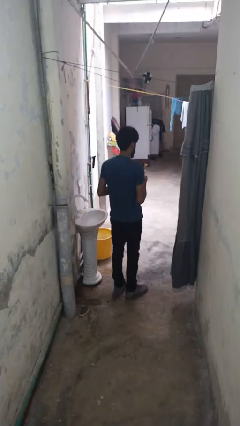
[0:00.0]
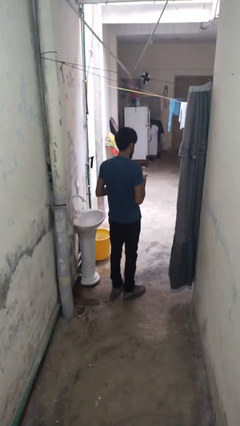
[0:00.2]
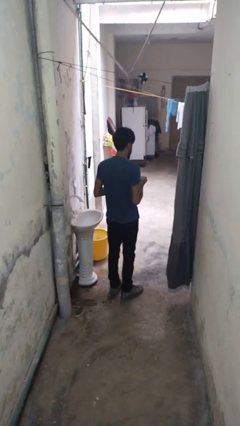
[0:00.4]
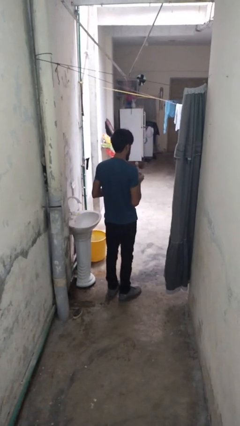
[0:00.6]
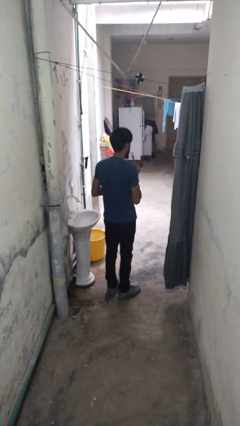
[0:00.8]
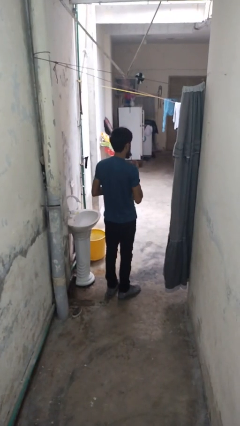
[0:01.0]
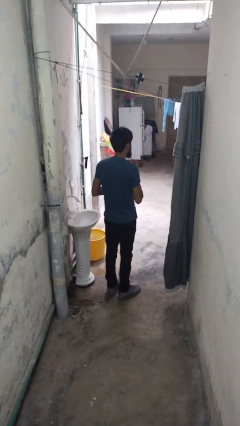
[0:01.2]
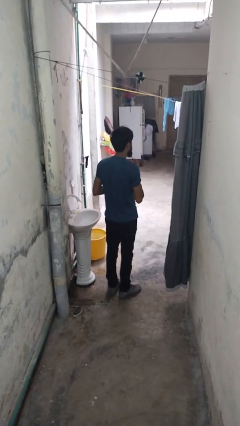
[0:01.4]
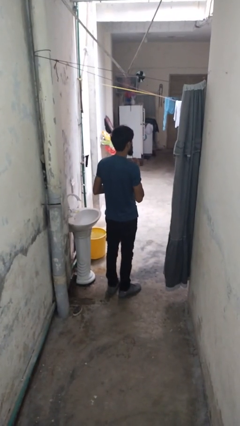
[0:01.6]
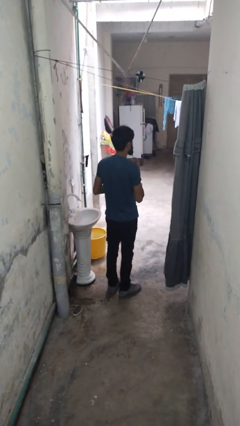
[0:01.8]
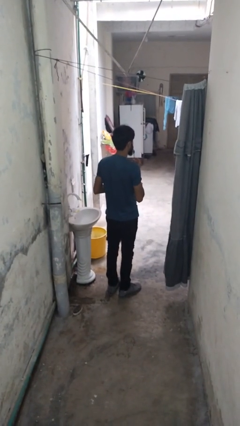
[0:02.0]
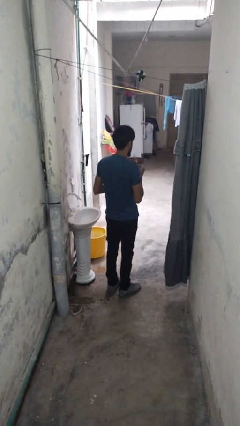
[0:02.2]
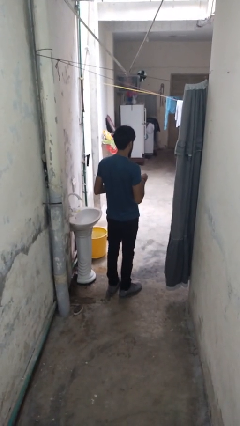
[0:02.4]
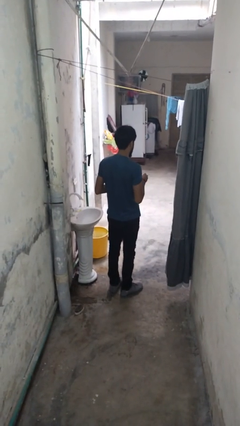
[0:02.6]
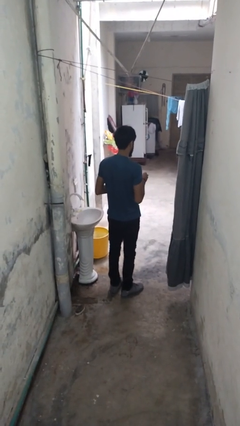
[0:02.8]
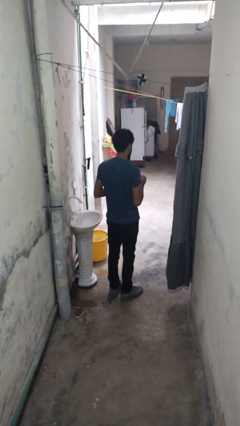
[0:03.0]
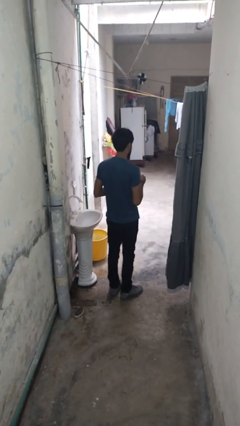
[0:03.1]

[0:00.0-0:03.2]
person eats with utensil

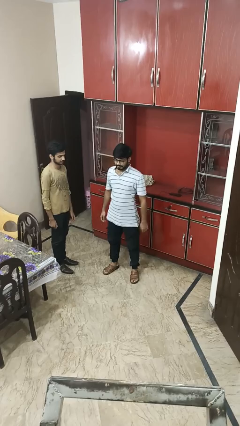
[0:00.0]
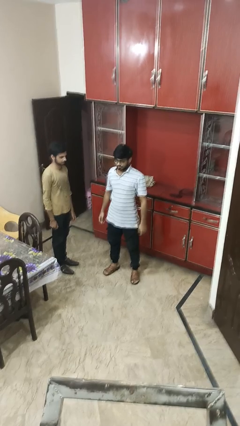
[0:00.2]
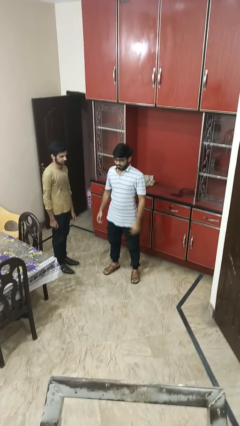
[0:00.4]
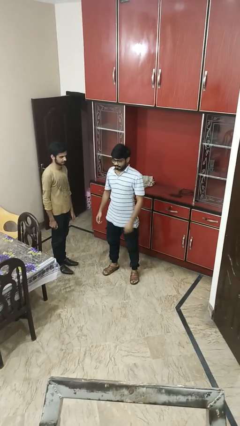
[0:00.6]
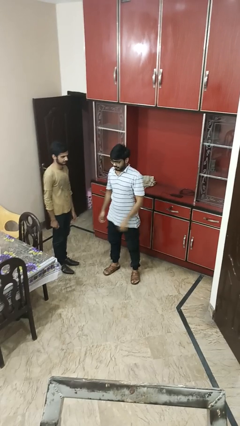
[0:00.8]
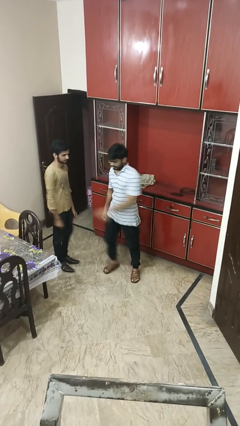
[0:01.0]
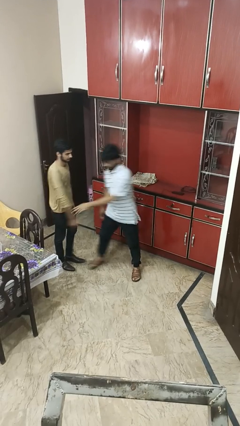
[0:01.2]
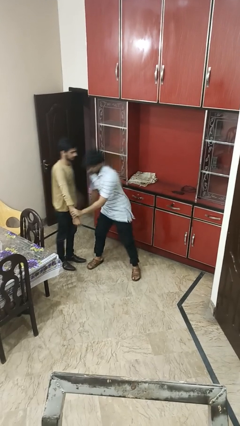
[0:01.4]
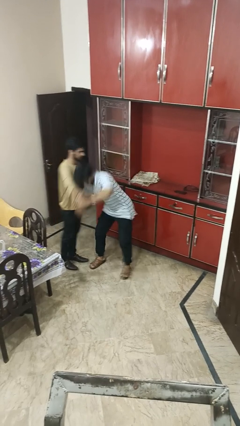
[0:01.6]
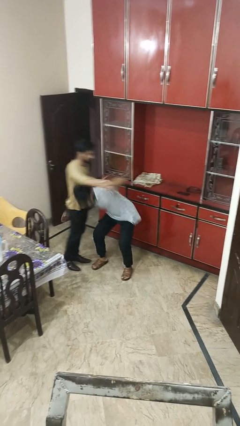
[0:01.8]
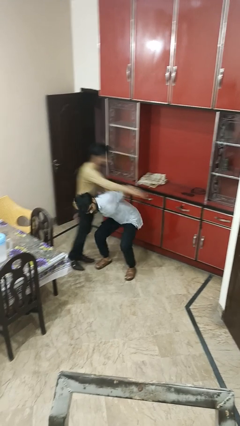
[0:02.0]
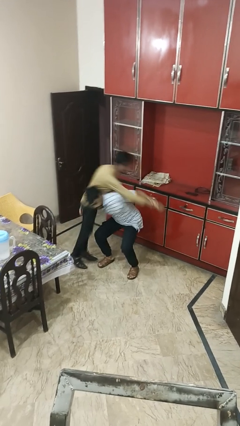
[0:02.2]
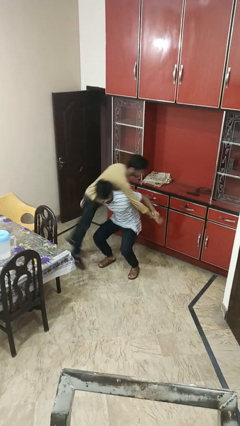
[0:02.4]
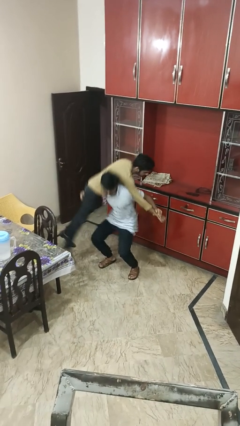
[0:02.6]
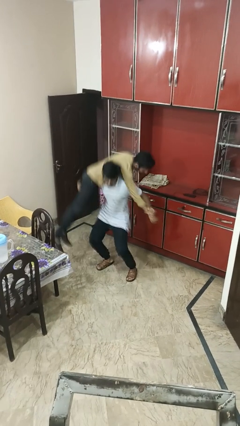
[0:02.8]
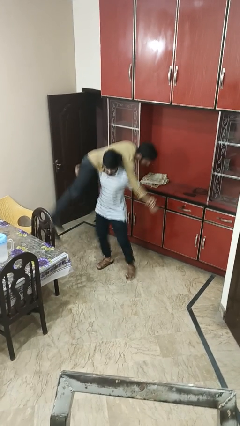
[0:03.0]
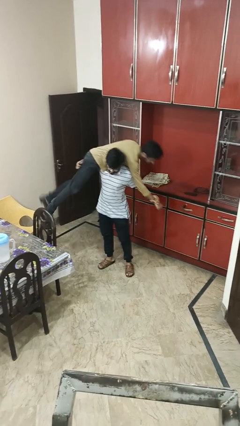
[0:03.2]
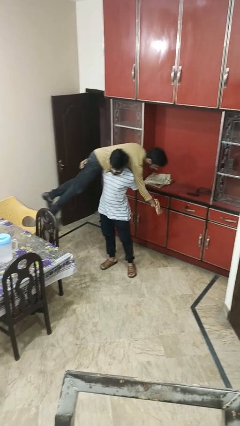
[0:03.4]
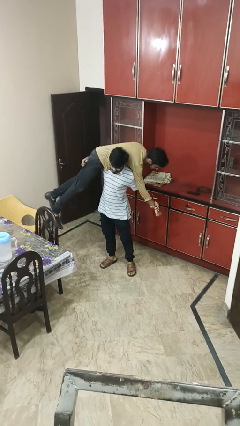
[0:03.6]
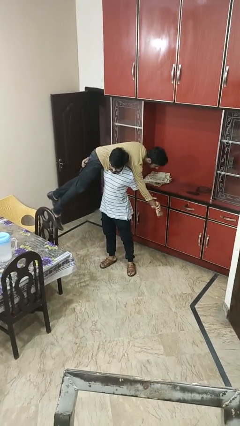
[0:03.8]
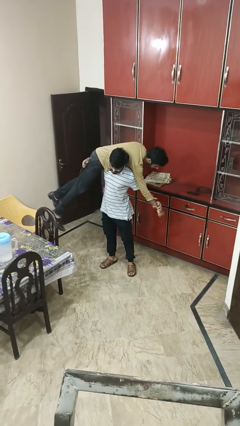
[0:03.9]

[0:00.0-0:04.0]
person carries person over shoulder

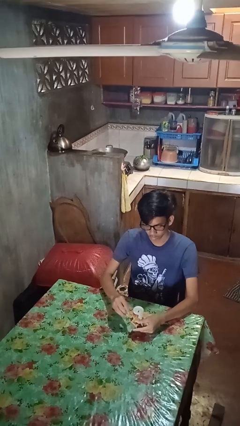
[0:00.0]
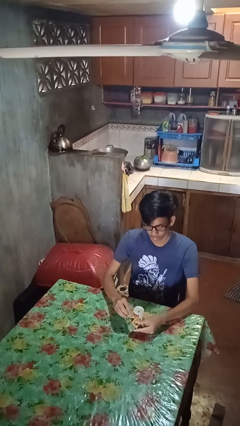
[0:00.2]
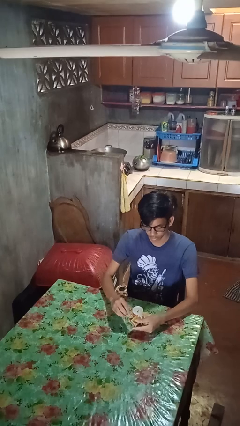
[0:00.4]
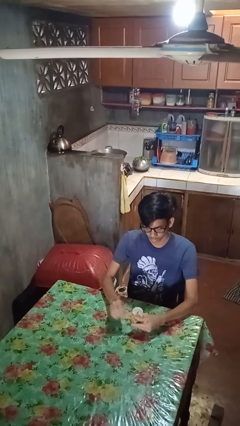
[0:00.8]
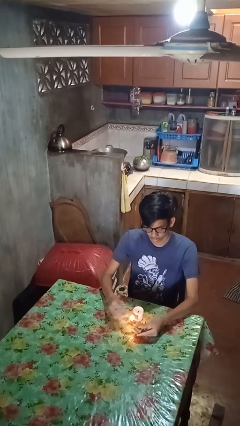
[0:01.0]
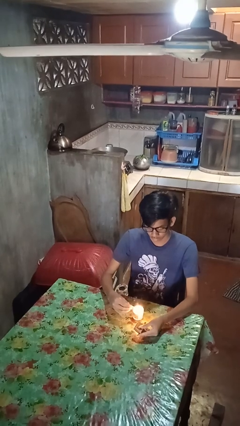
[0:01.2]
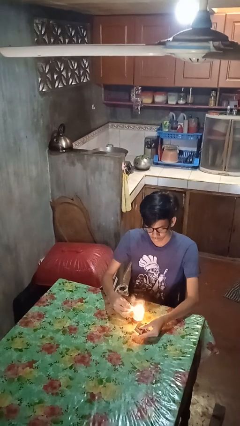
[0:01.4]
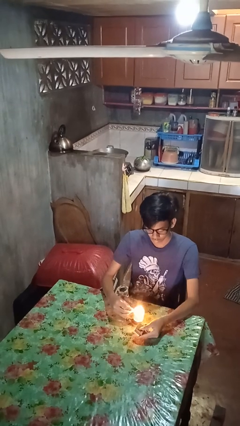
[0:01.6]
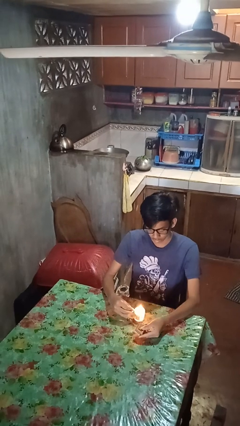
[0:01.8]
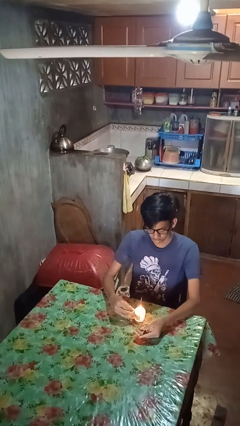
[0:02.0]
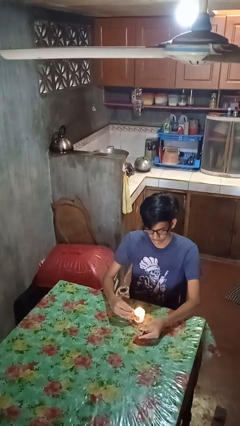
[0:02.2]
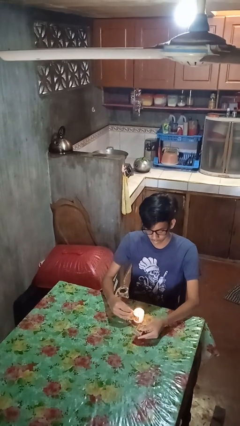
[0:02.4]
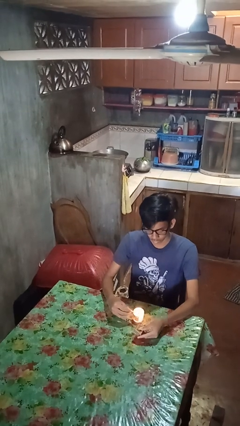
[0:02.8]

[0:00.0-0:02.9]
person lights candle

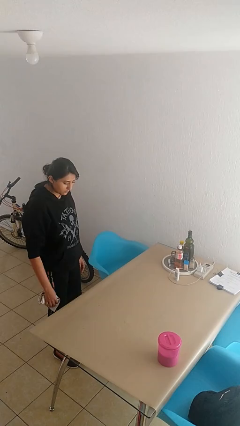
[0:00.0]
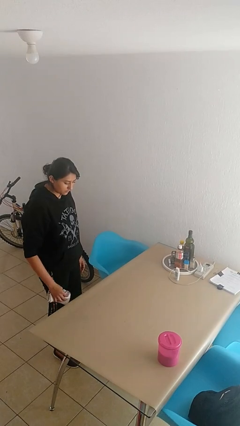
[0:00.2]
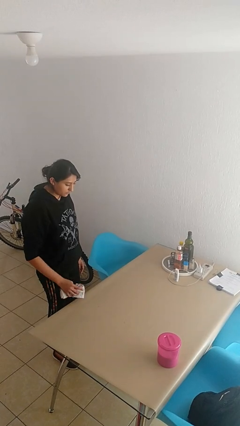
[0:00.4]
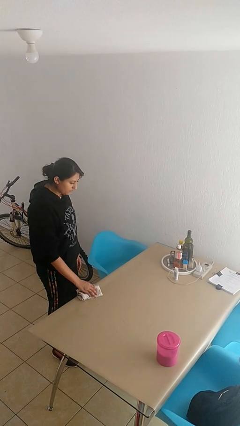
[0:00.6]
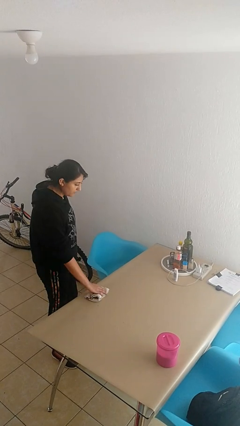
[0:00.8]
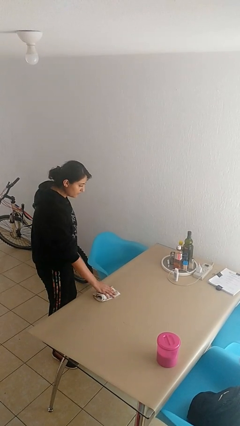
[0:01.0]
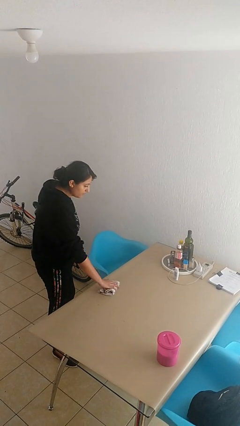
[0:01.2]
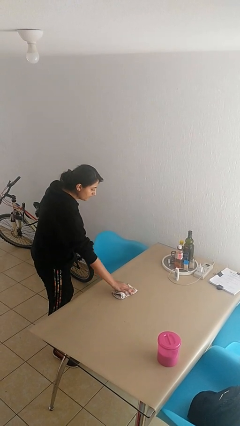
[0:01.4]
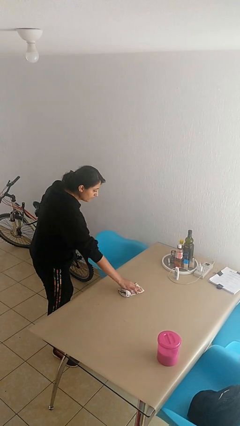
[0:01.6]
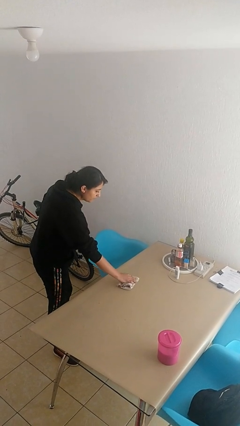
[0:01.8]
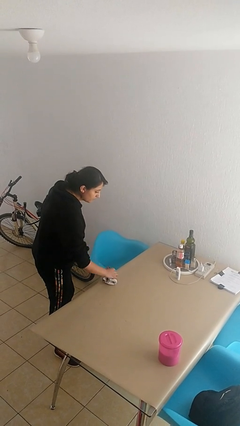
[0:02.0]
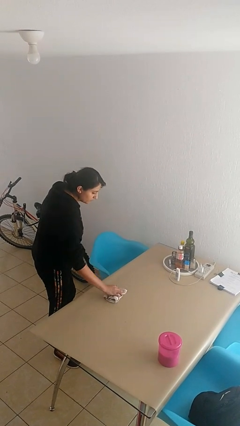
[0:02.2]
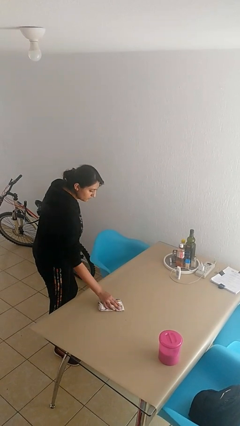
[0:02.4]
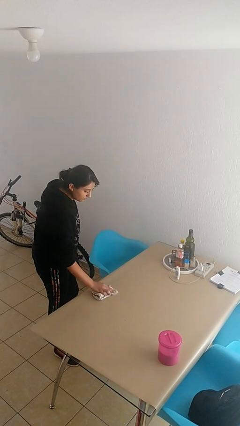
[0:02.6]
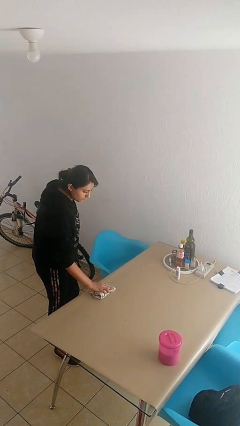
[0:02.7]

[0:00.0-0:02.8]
person cleans table with rag

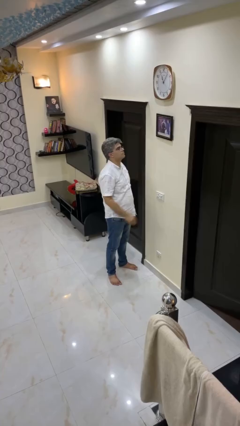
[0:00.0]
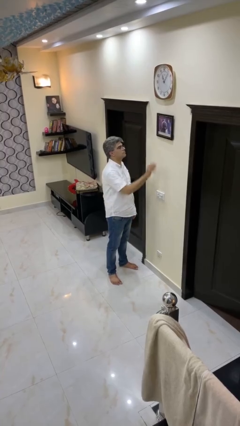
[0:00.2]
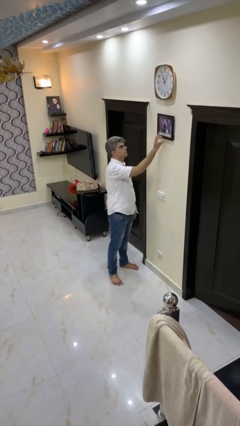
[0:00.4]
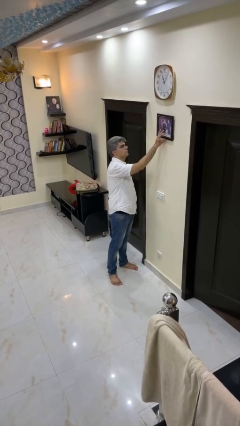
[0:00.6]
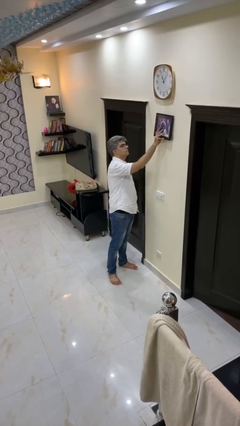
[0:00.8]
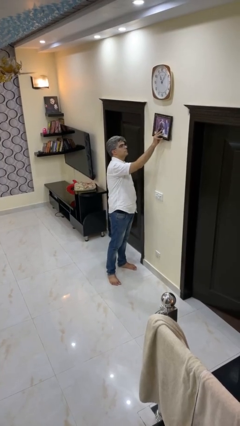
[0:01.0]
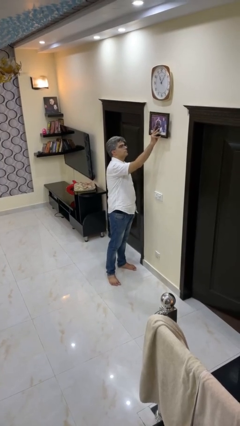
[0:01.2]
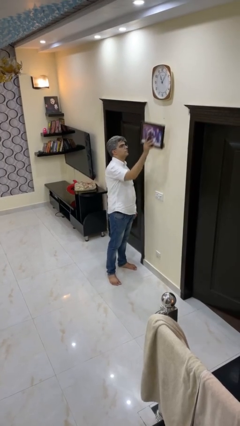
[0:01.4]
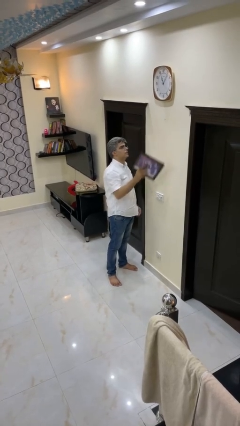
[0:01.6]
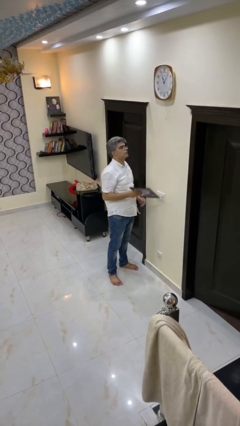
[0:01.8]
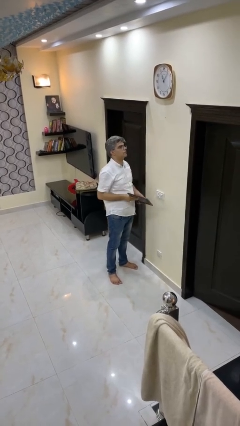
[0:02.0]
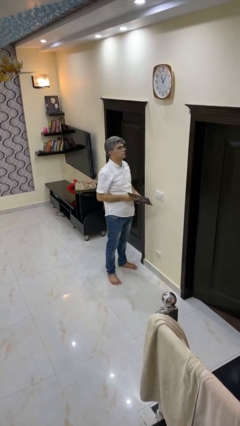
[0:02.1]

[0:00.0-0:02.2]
person takes down picture frame

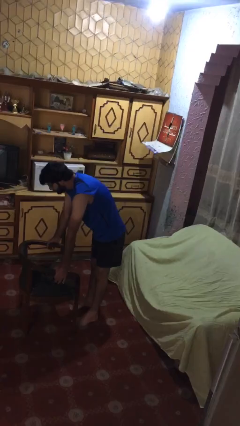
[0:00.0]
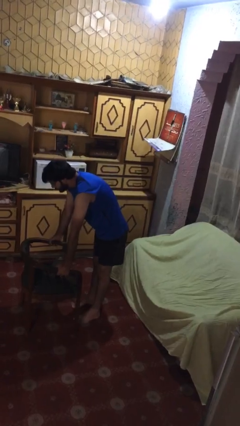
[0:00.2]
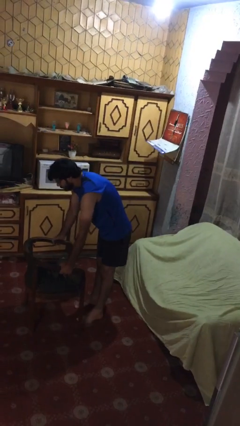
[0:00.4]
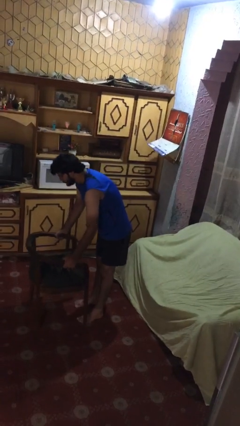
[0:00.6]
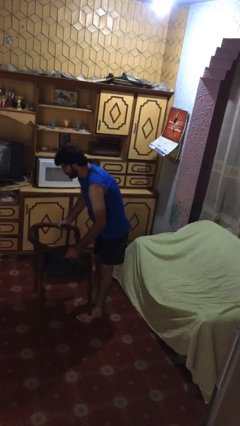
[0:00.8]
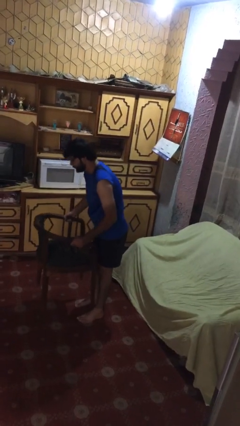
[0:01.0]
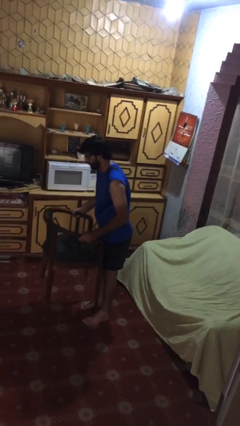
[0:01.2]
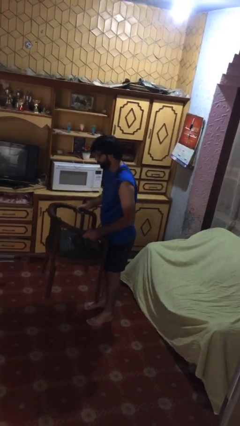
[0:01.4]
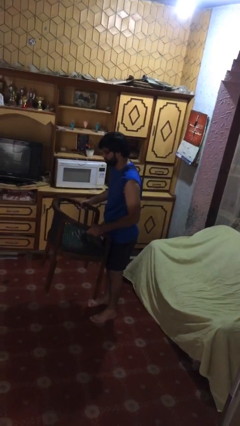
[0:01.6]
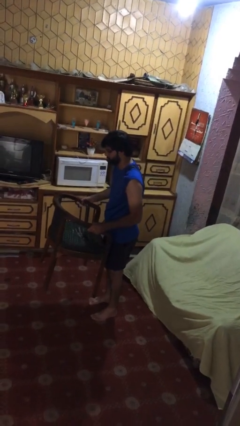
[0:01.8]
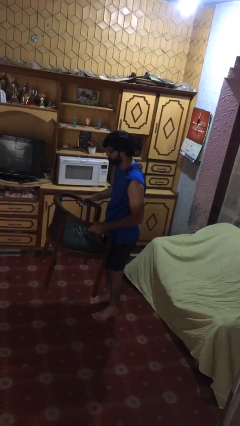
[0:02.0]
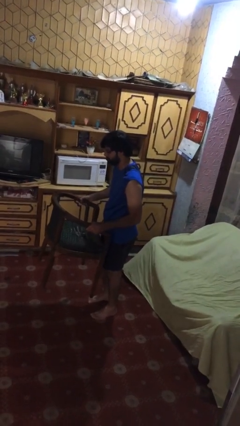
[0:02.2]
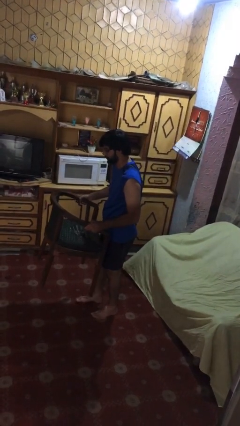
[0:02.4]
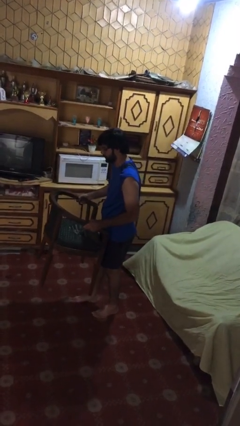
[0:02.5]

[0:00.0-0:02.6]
person picks up object from floor

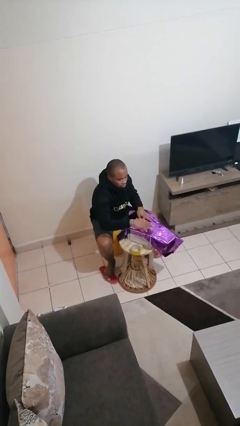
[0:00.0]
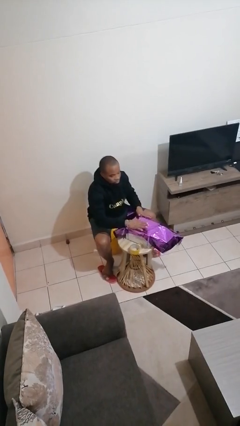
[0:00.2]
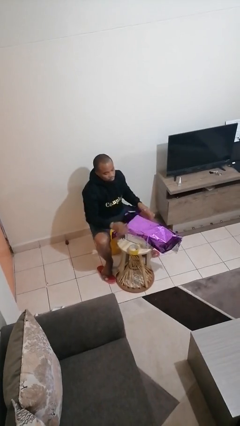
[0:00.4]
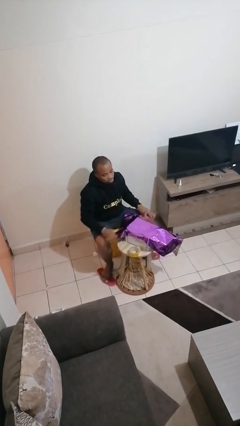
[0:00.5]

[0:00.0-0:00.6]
person wraps box
